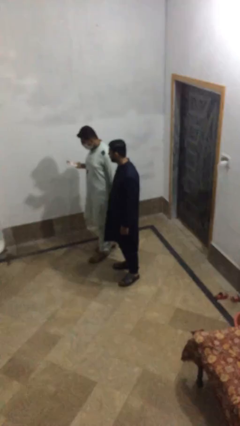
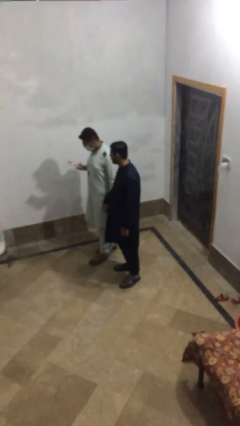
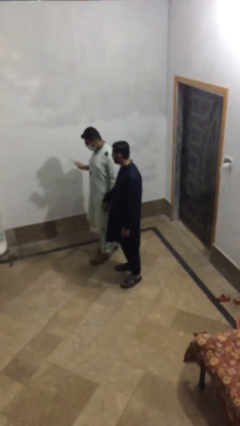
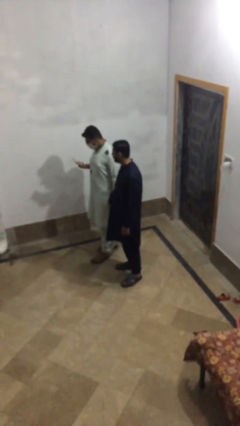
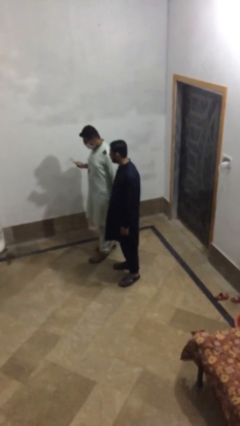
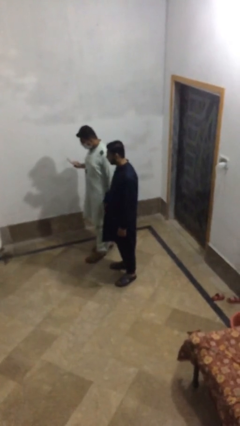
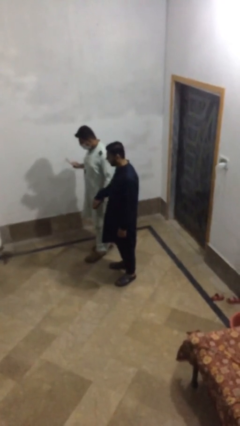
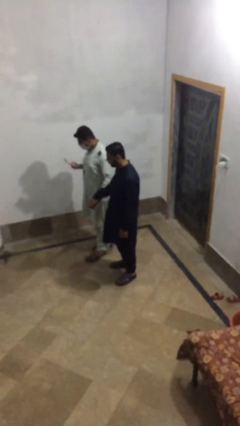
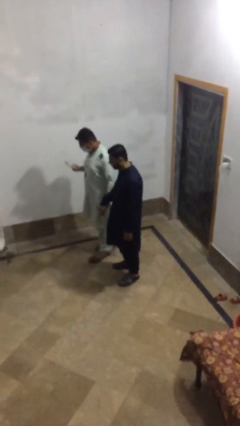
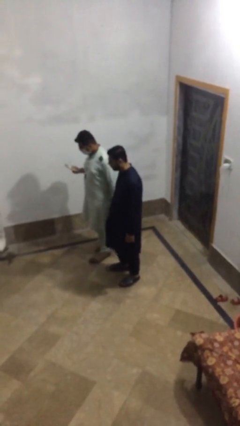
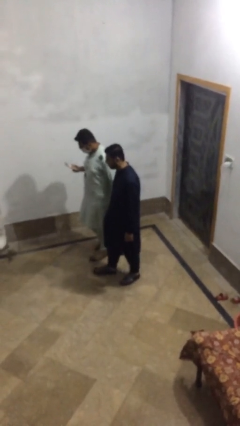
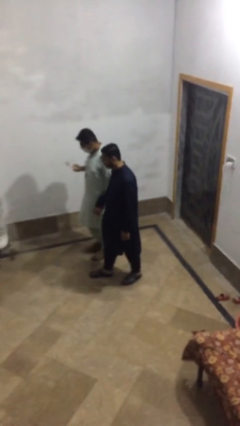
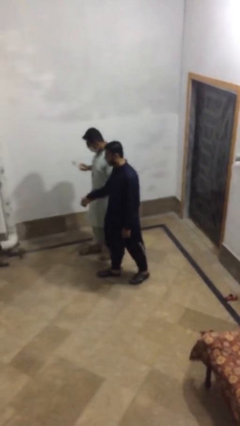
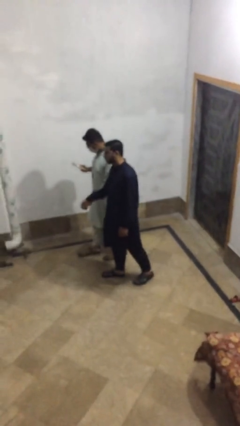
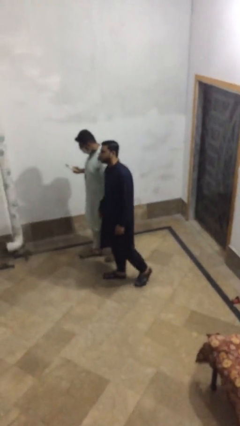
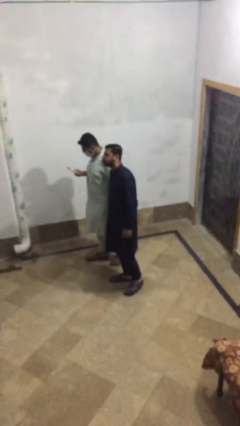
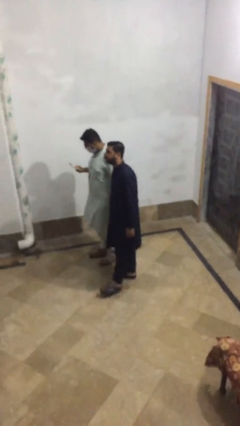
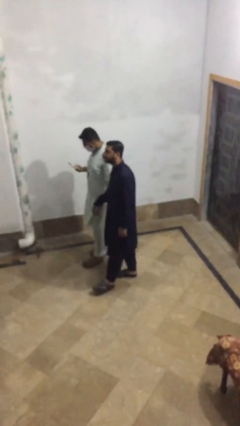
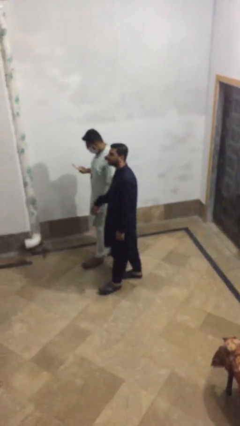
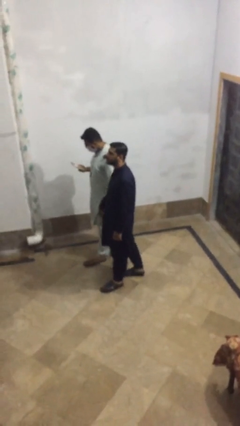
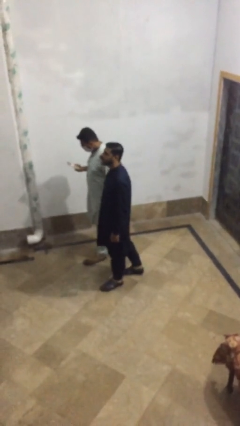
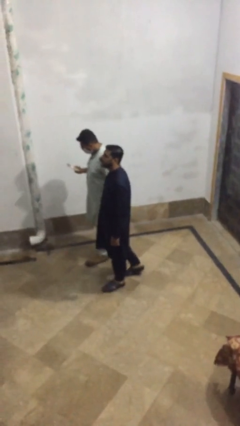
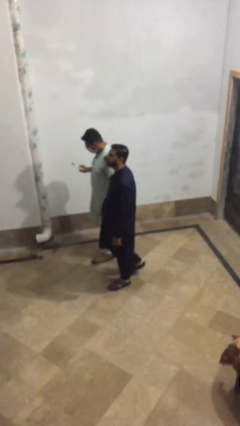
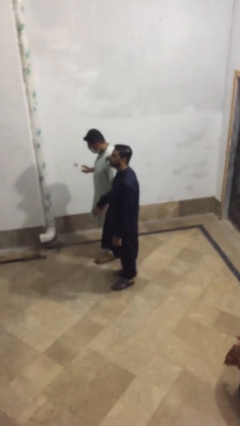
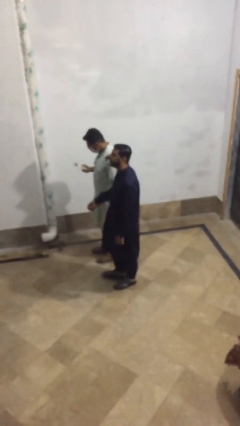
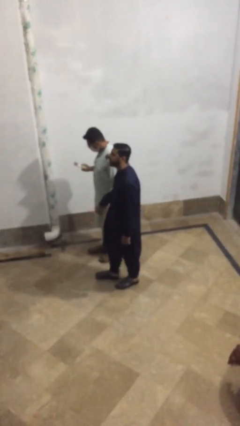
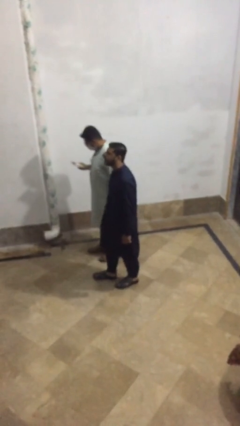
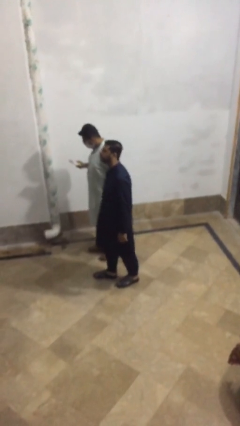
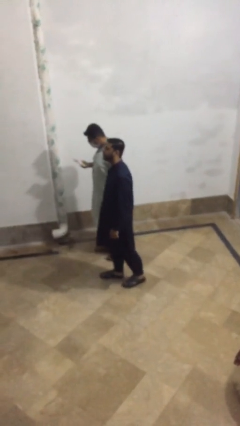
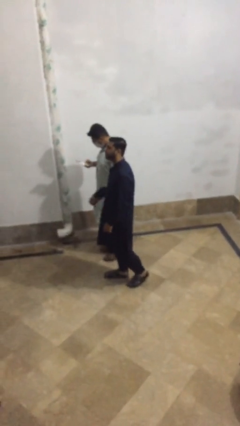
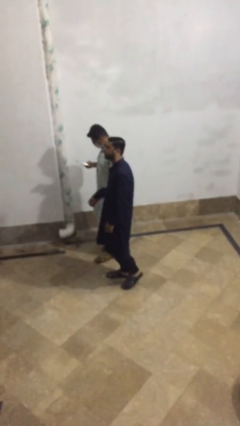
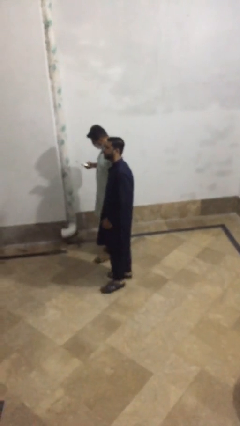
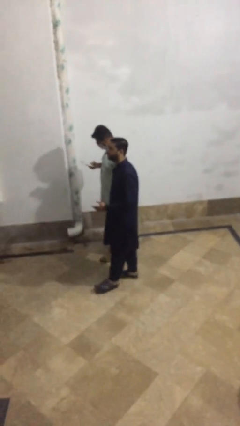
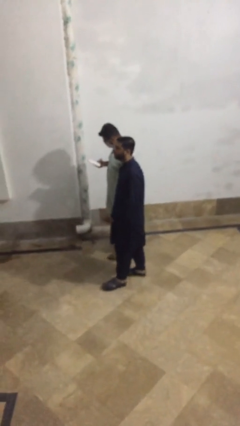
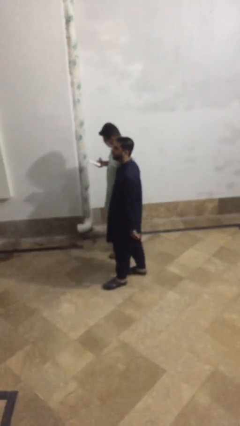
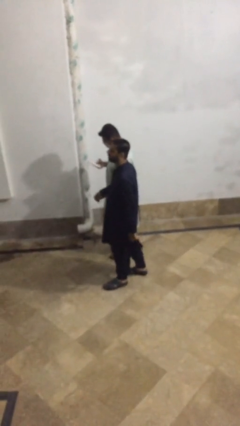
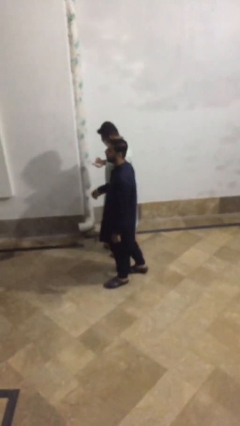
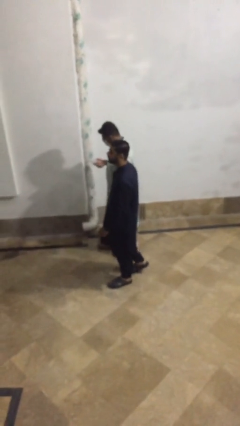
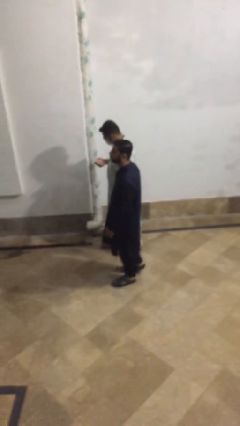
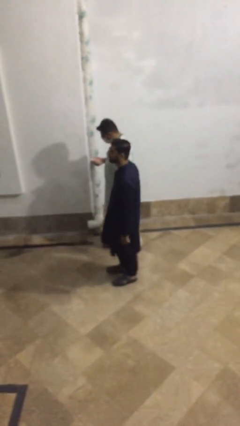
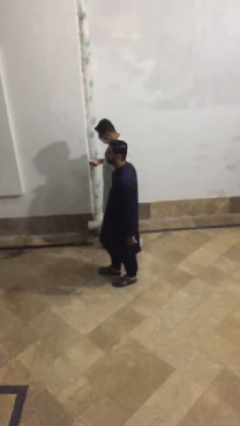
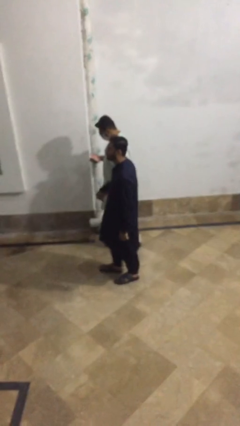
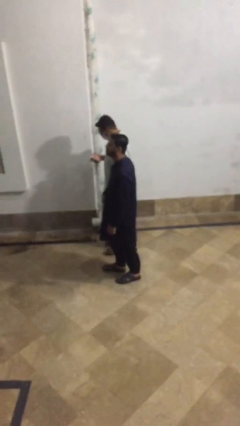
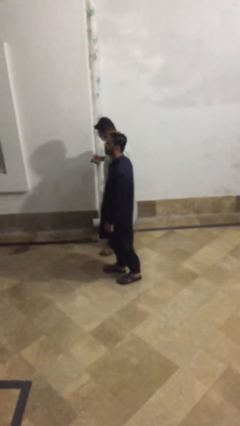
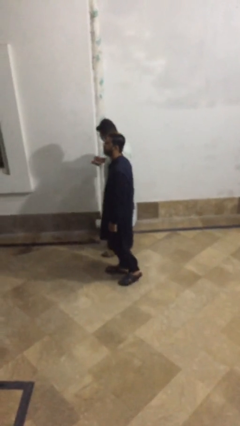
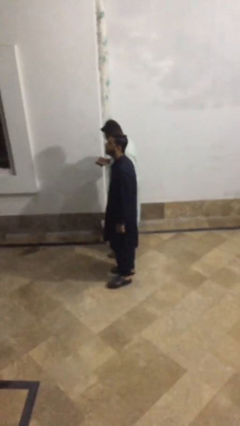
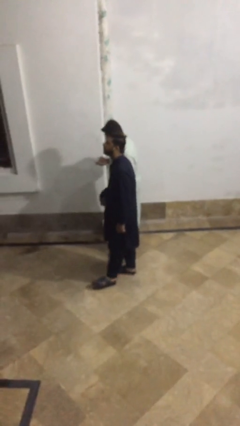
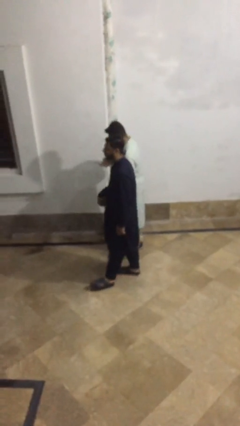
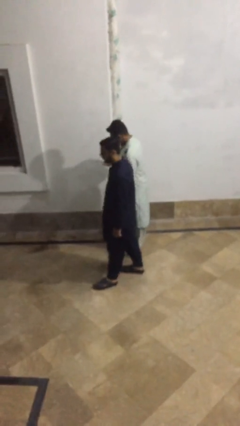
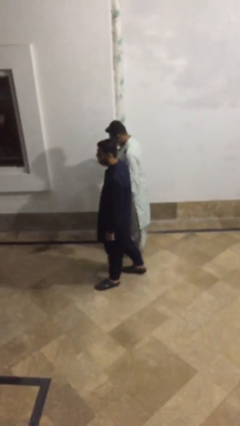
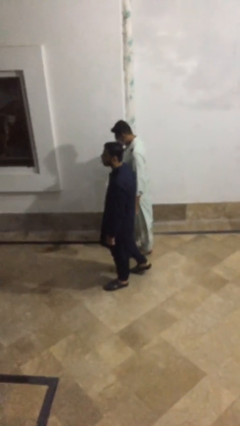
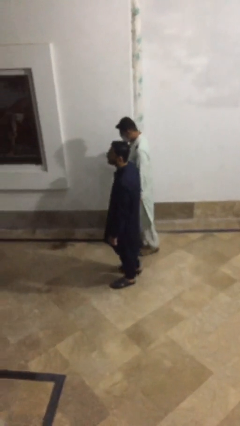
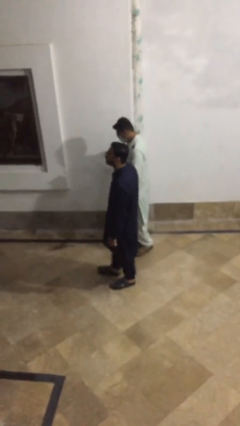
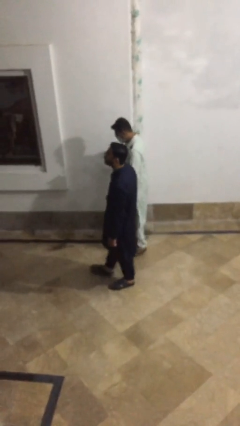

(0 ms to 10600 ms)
person holds hand

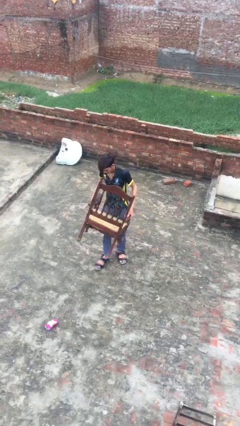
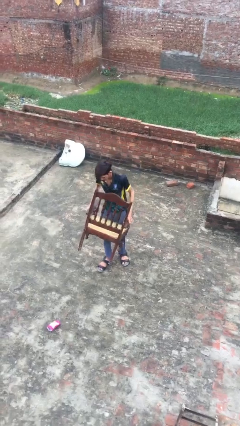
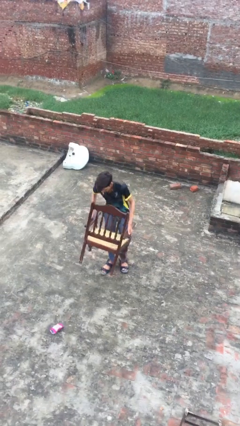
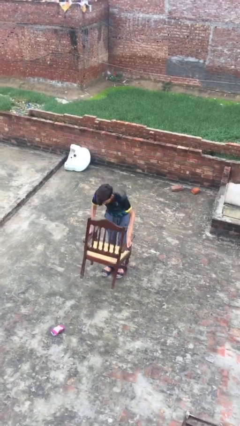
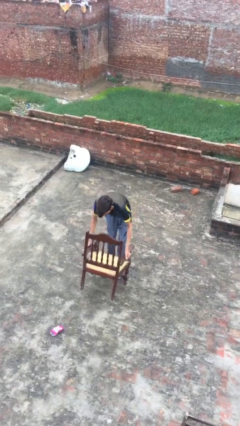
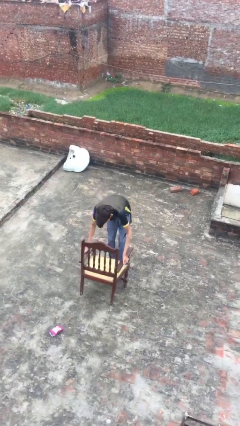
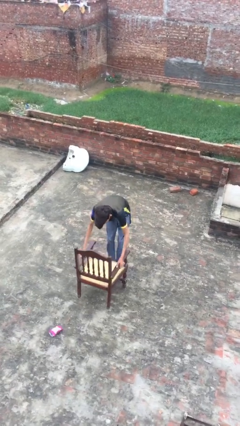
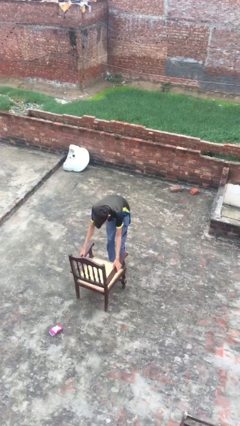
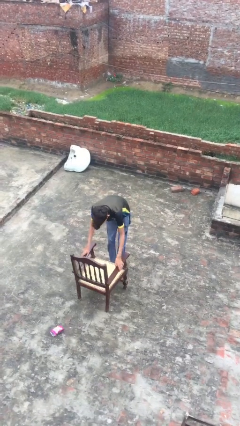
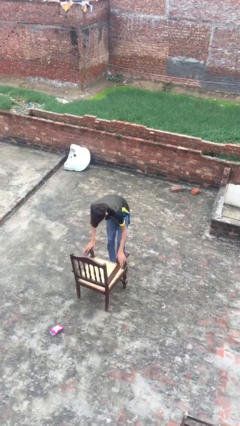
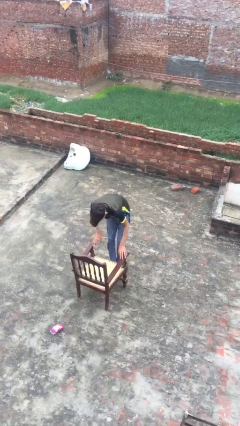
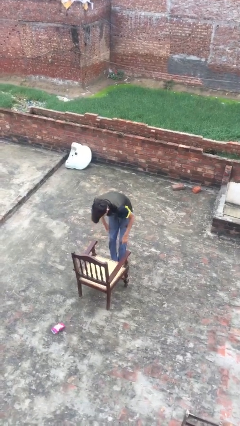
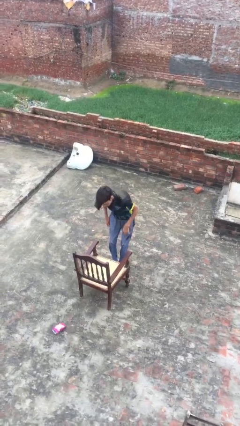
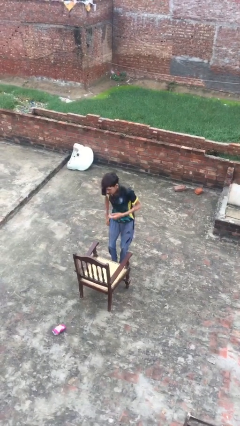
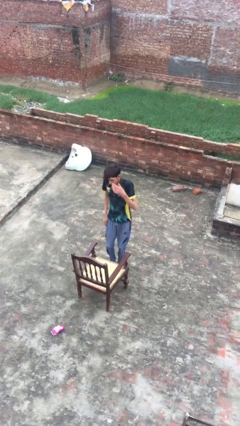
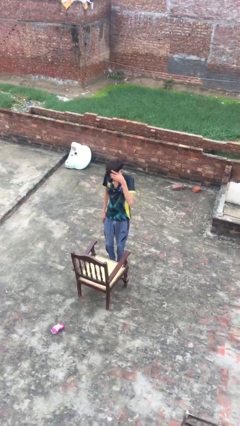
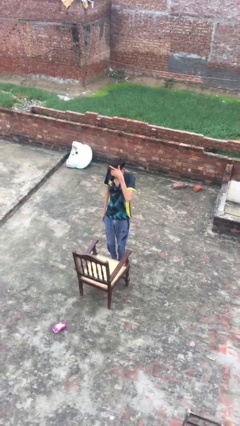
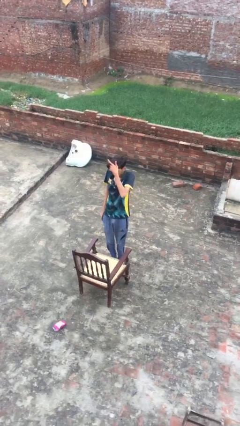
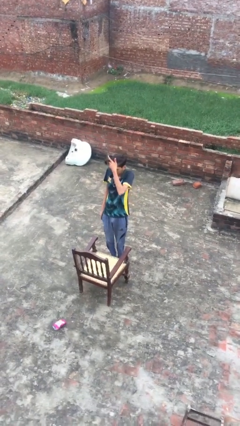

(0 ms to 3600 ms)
person puts down object on floor

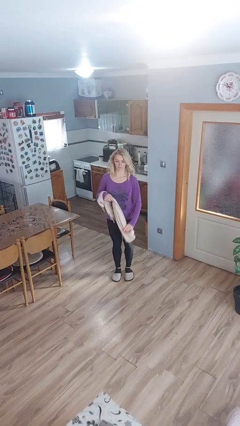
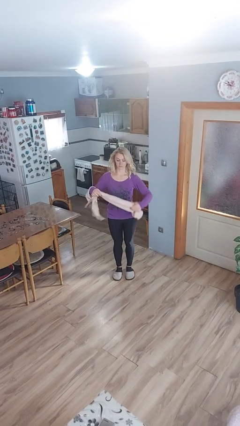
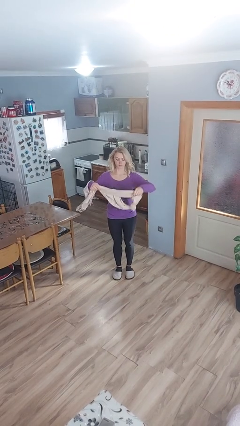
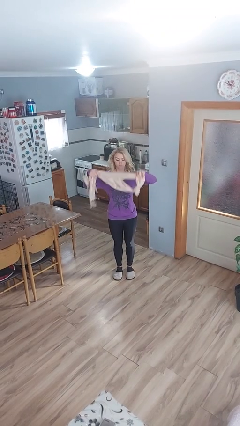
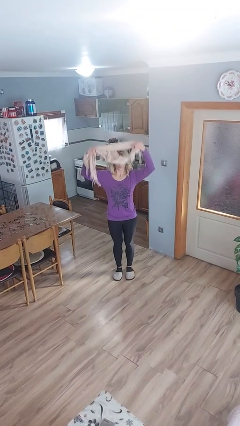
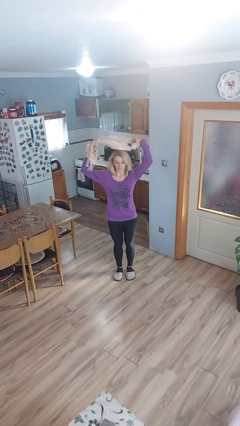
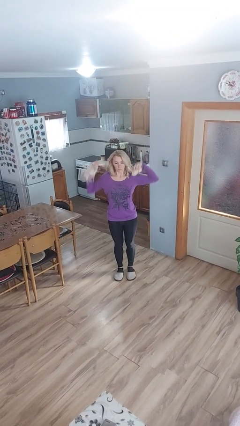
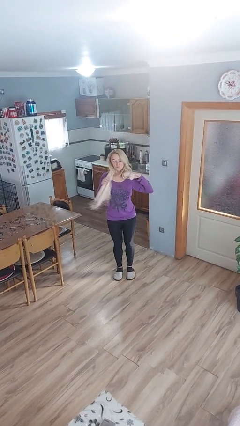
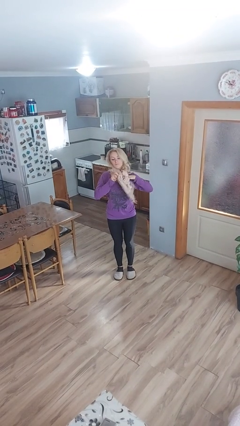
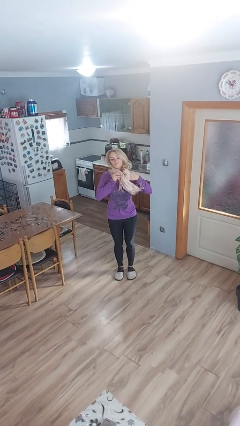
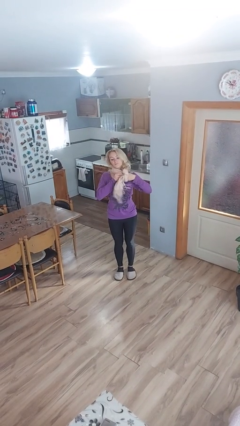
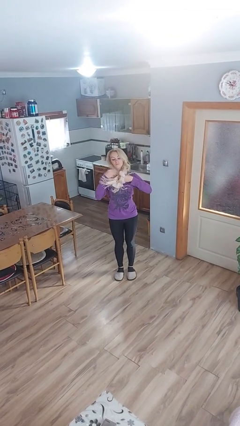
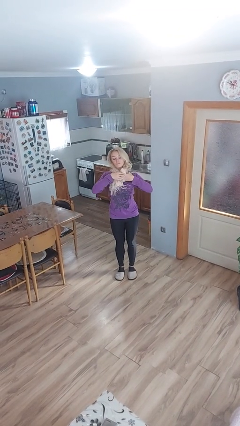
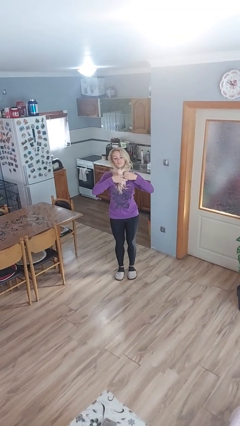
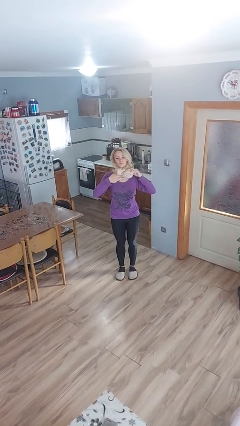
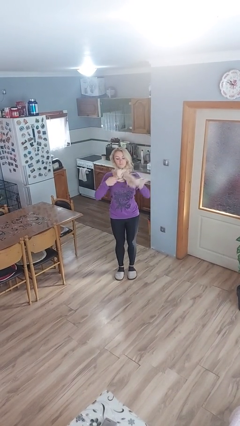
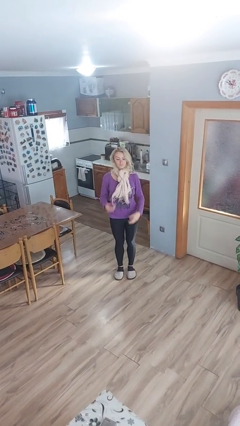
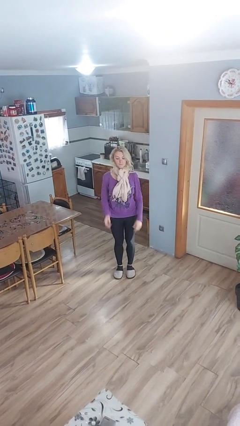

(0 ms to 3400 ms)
person puts on scarf

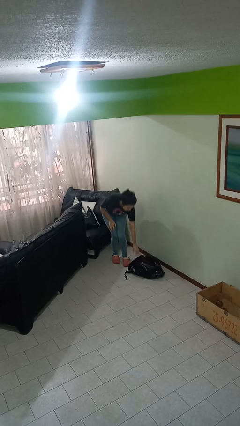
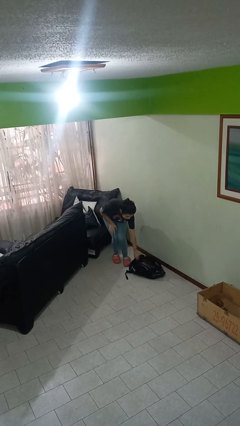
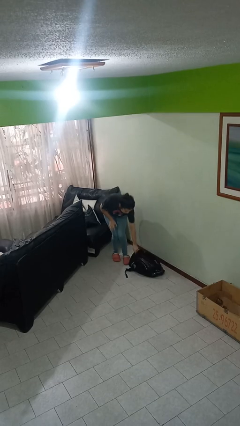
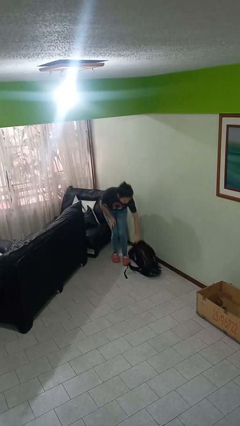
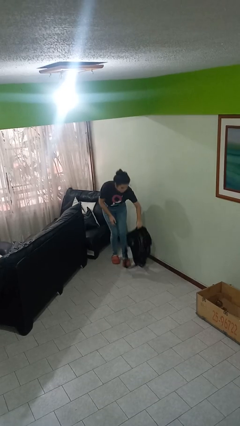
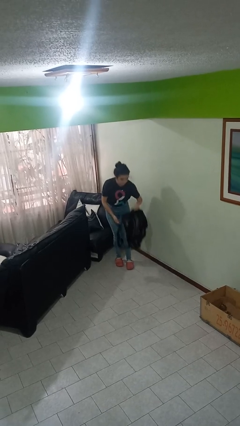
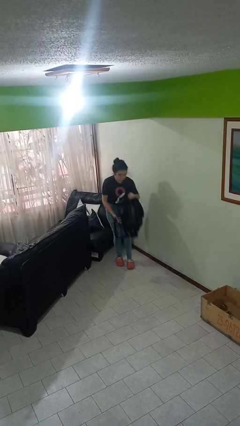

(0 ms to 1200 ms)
person picks up object from floor
